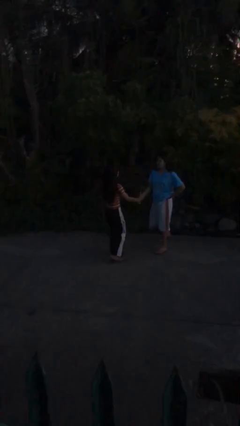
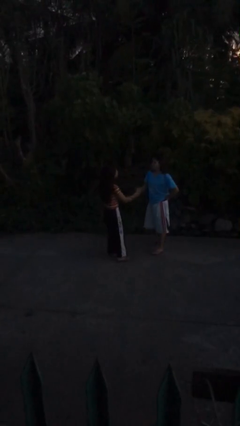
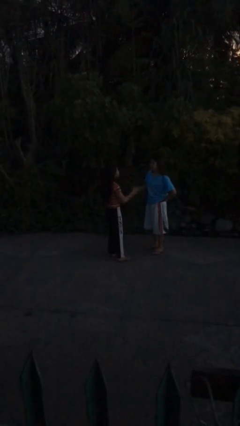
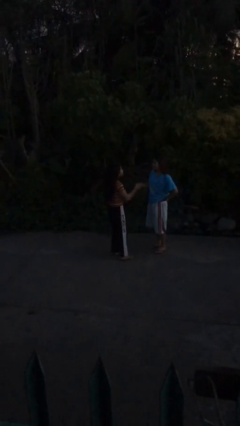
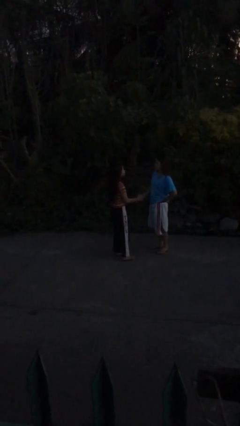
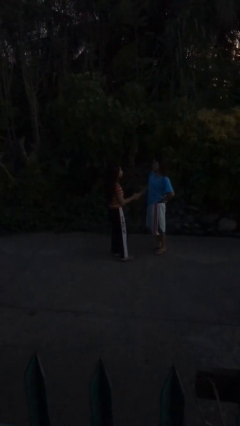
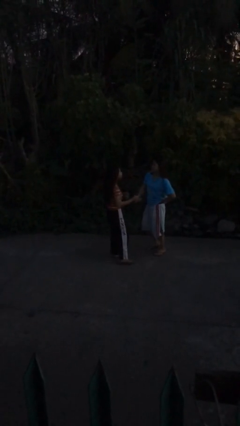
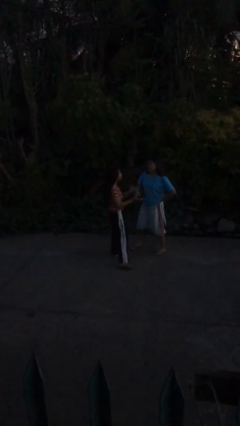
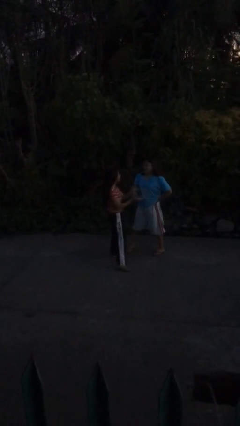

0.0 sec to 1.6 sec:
person shakes hand

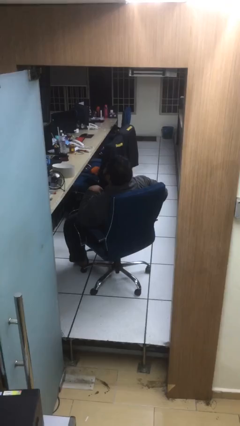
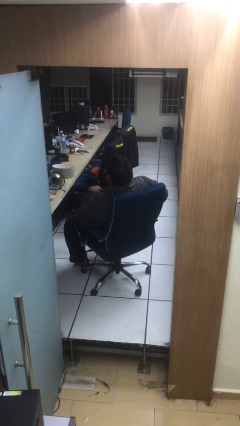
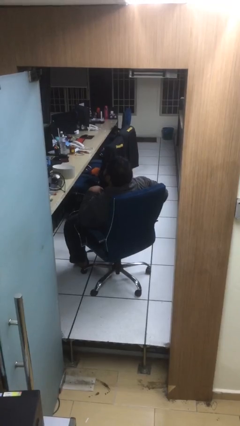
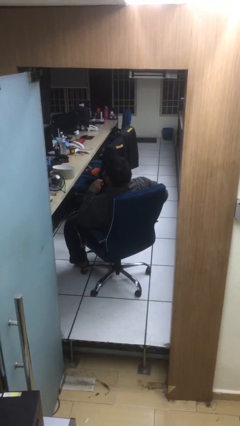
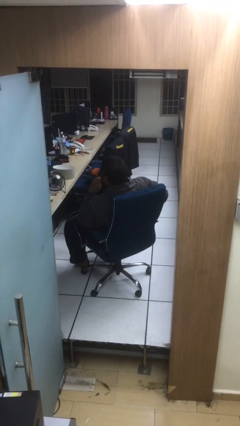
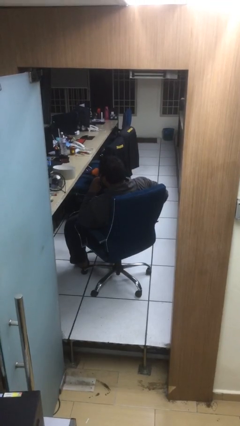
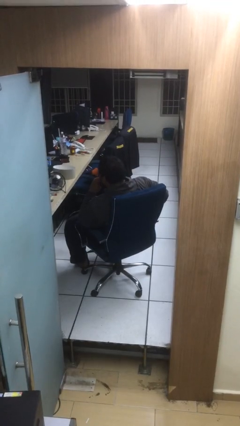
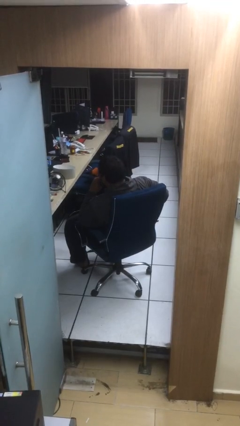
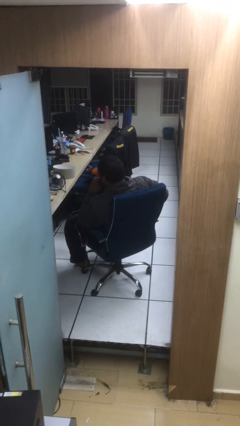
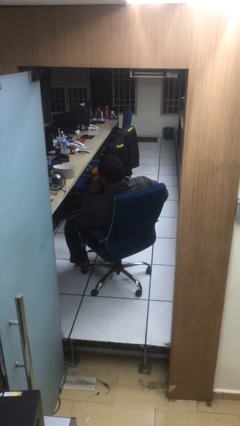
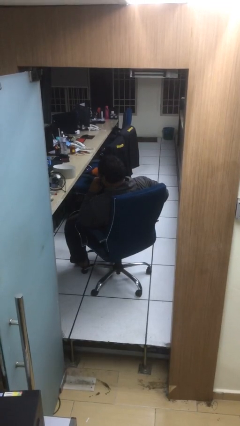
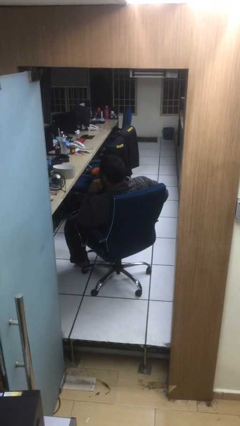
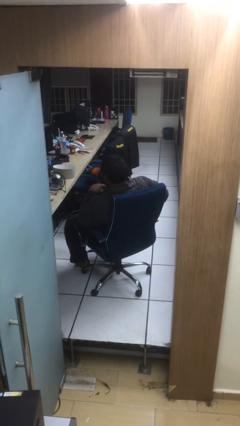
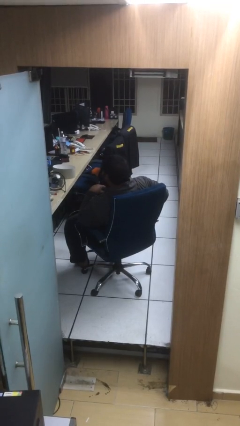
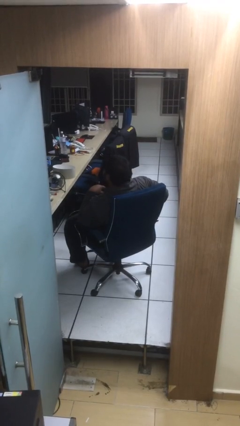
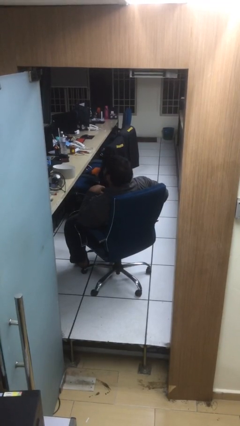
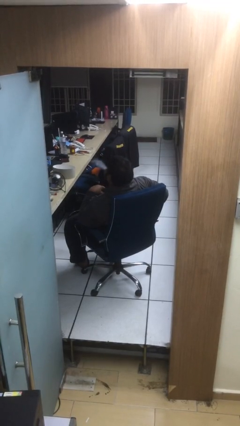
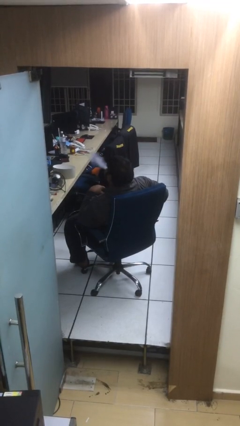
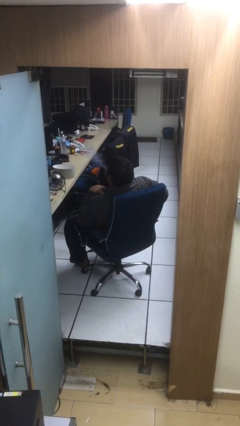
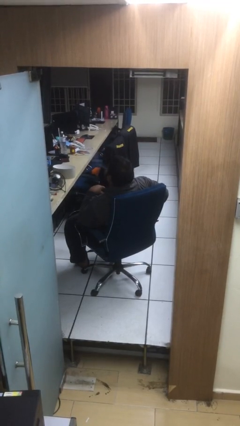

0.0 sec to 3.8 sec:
person vapes

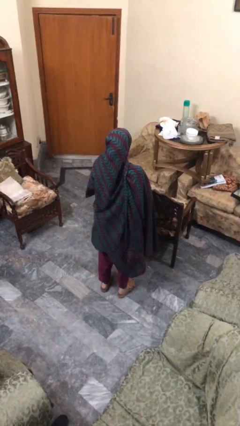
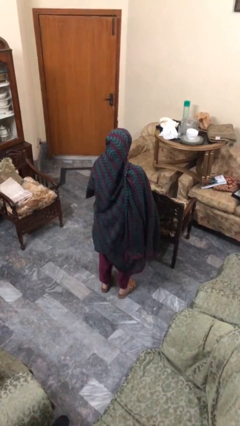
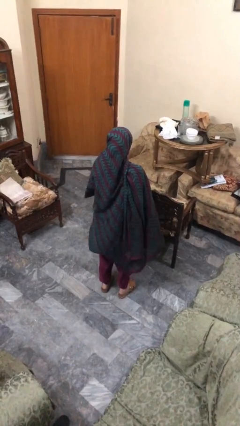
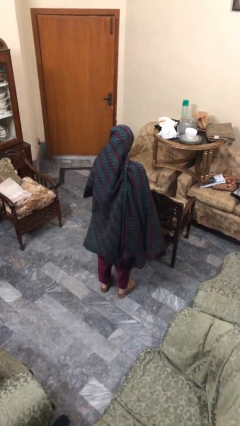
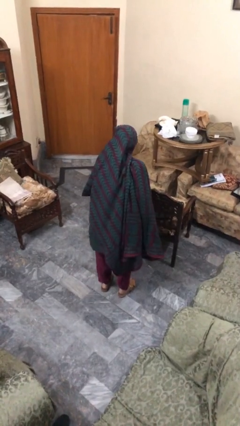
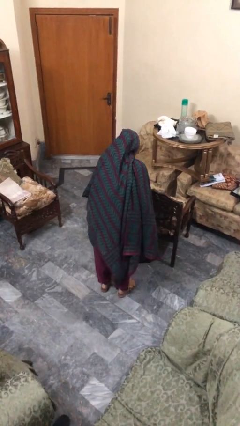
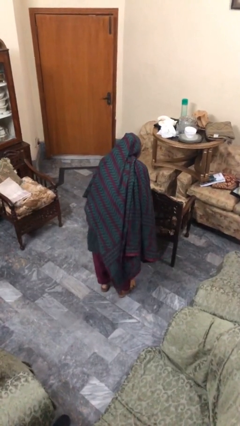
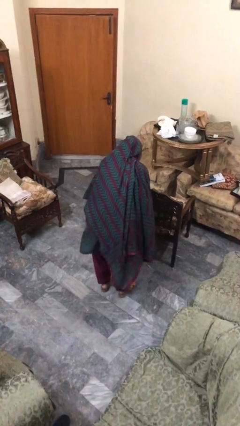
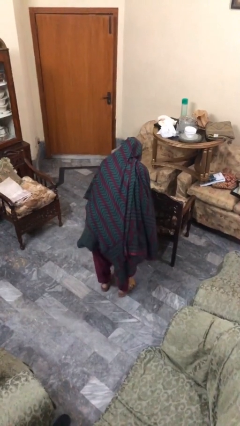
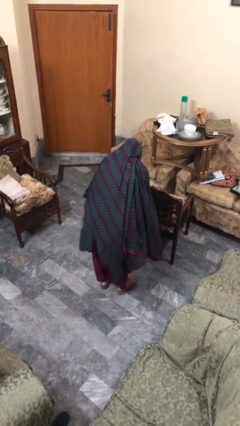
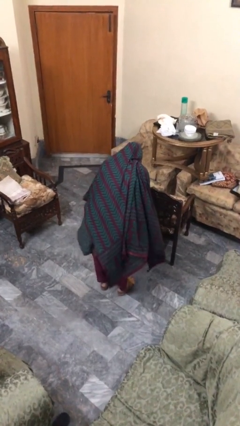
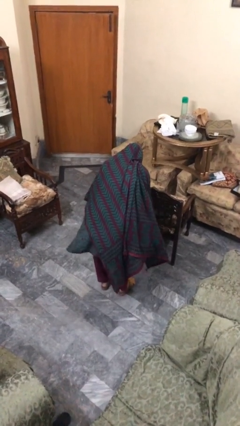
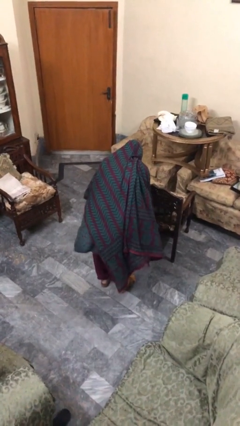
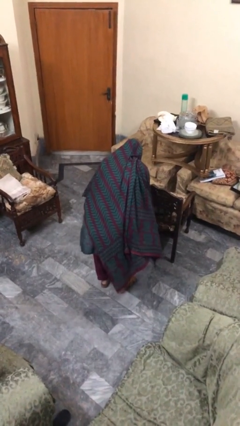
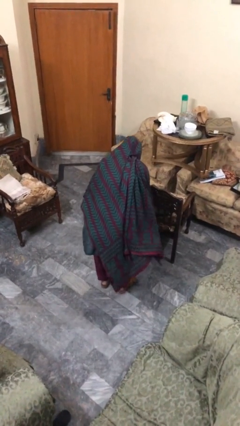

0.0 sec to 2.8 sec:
person bows

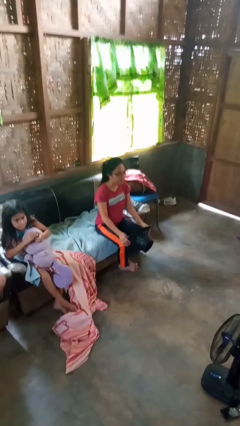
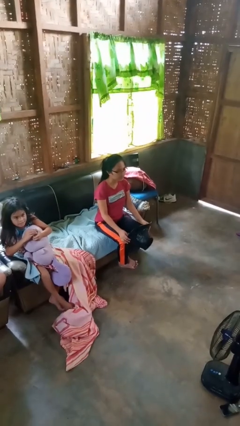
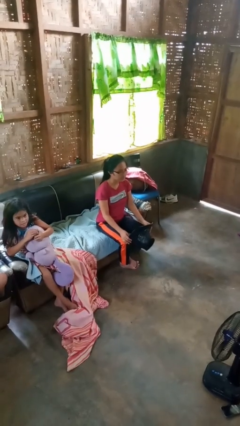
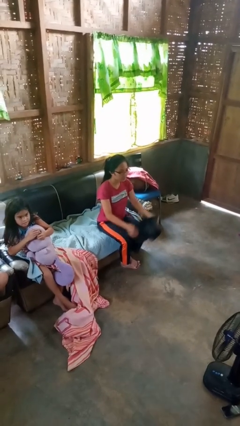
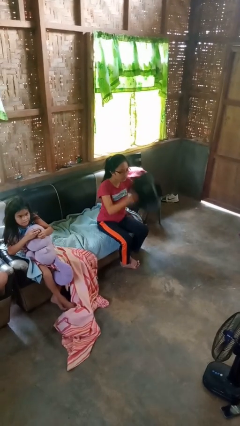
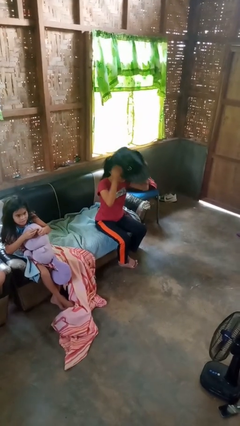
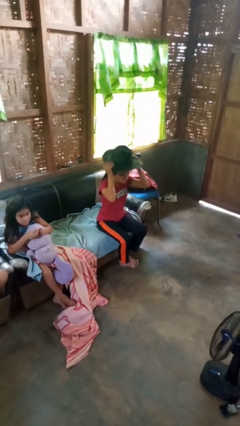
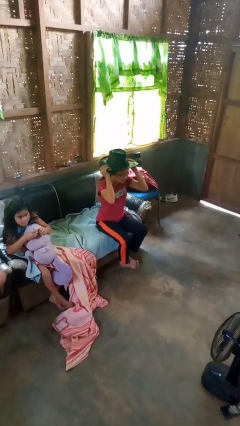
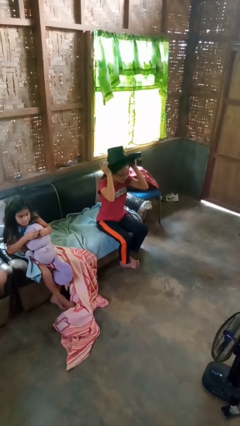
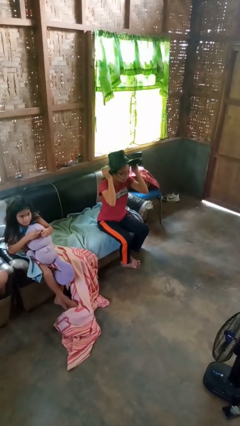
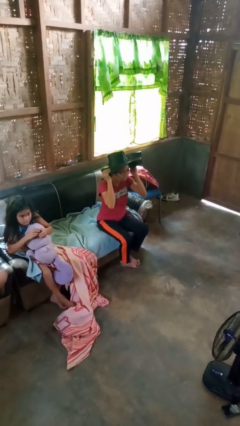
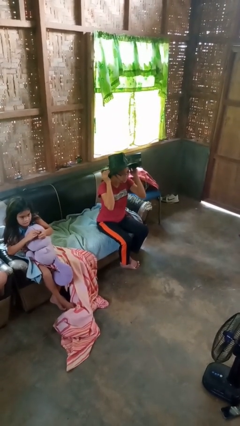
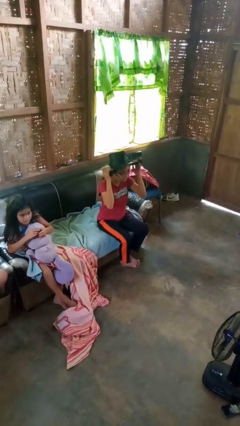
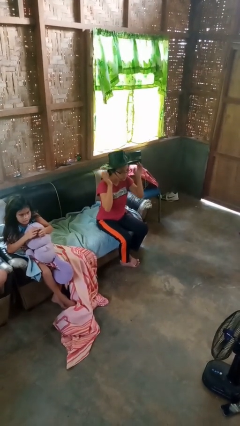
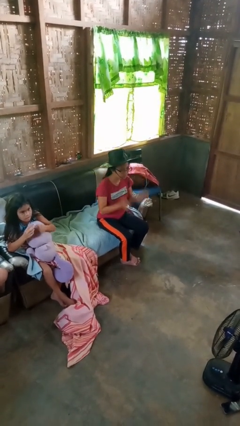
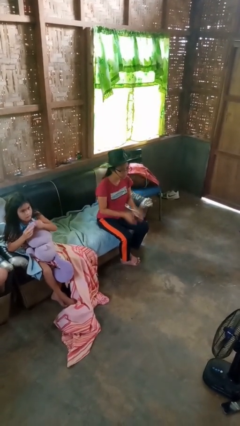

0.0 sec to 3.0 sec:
person puts on hat

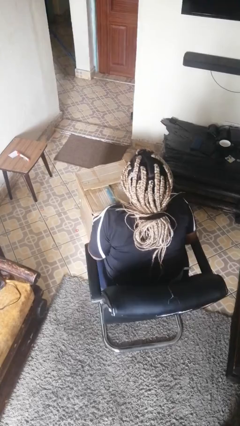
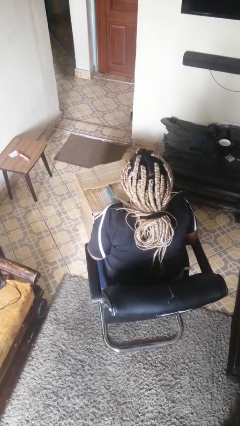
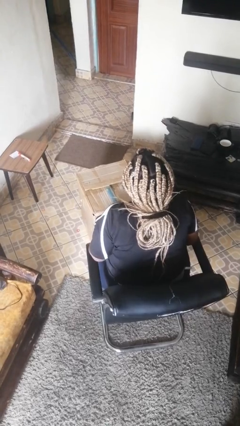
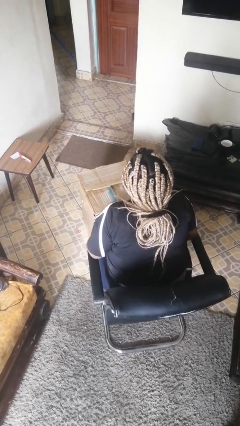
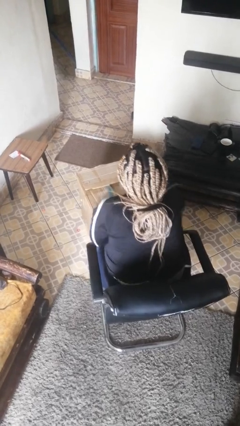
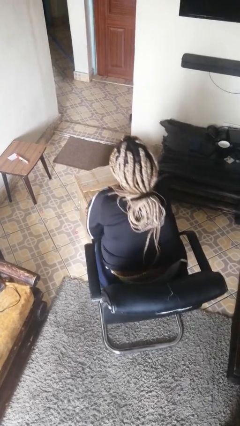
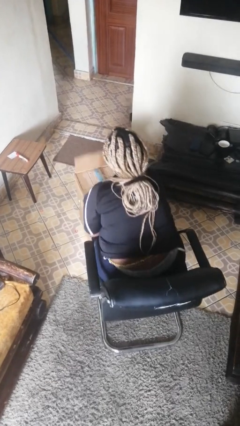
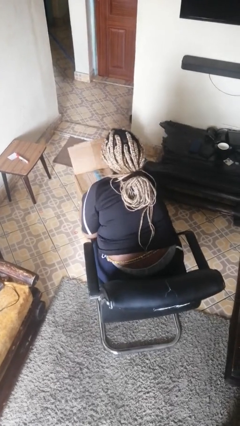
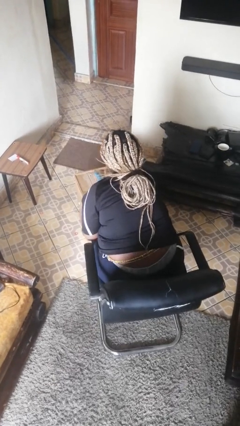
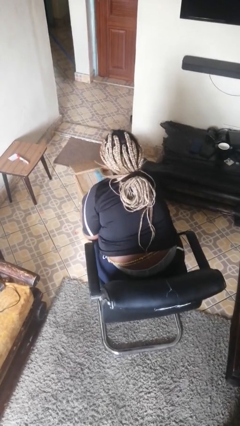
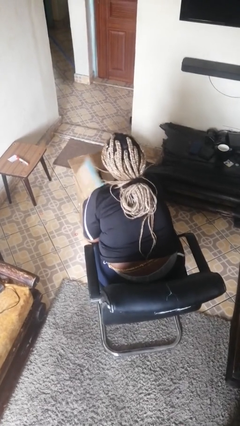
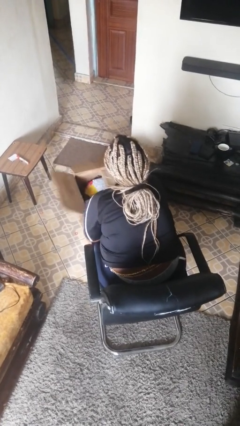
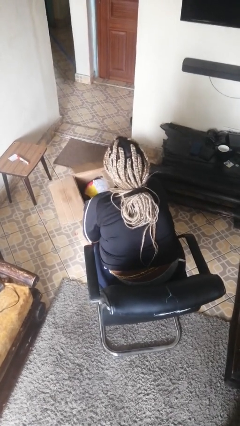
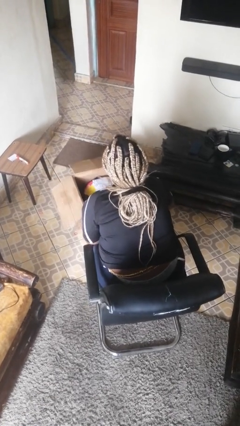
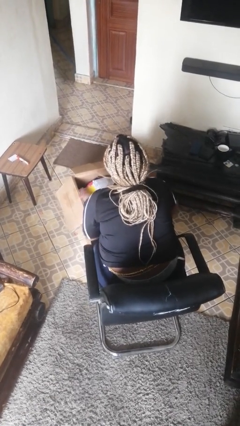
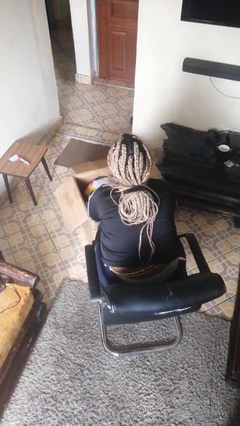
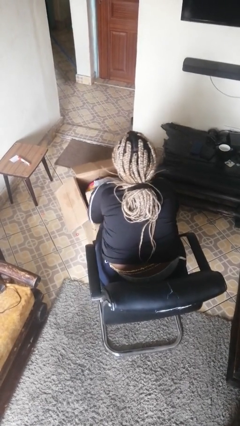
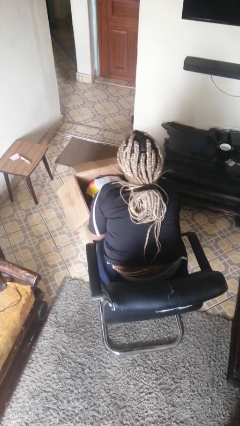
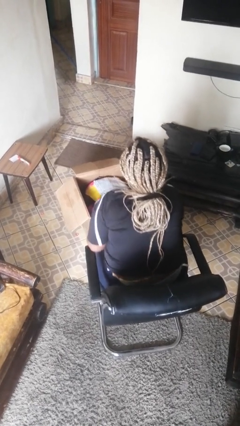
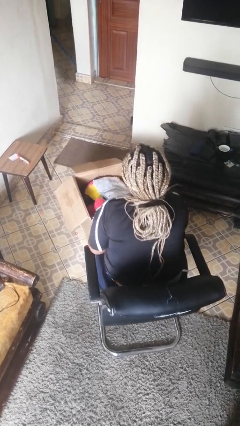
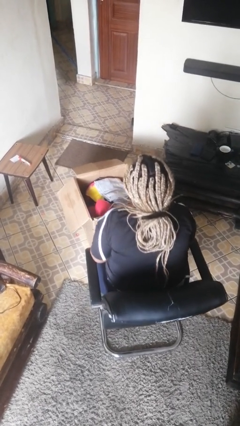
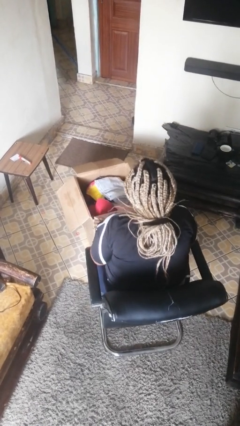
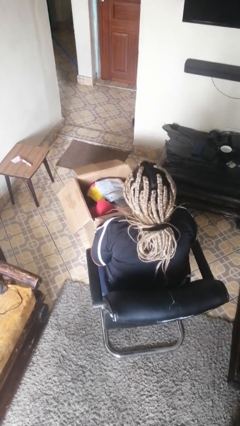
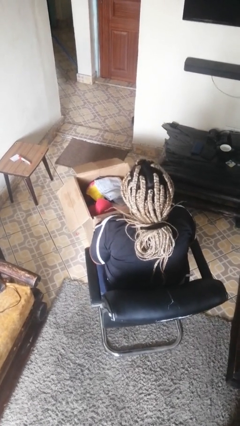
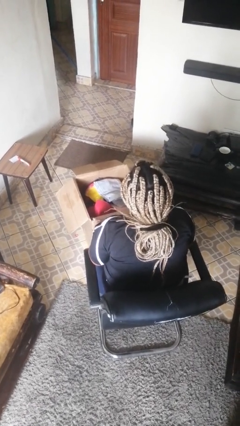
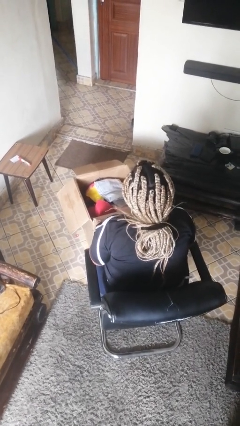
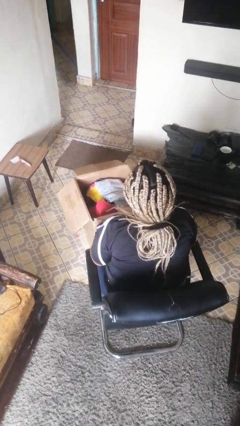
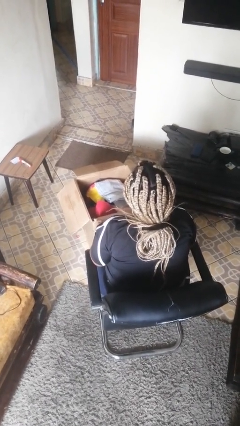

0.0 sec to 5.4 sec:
person opens box

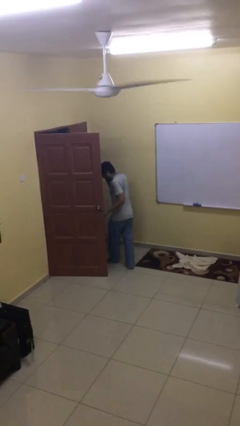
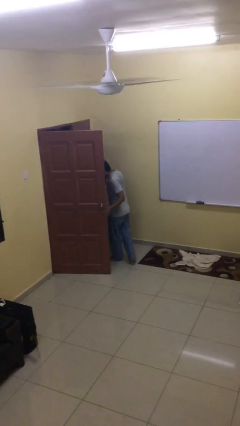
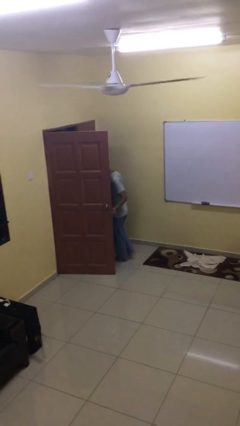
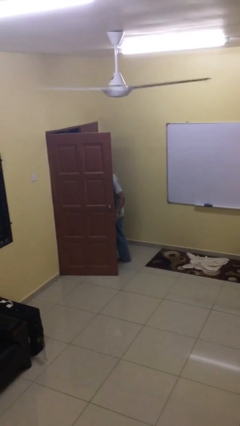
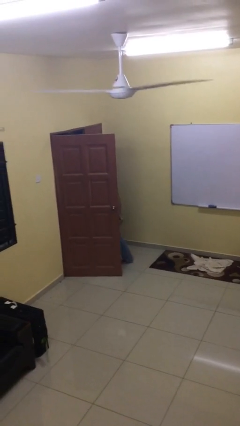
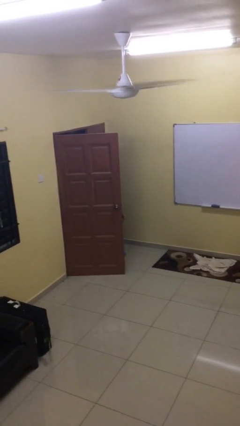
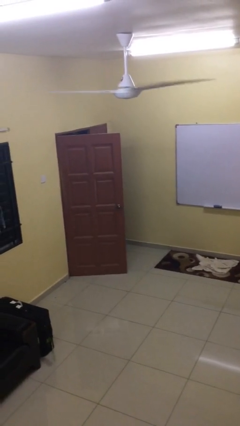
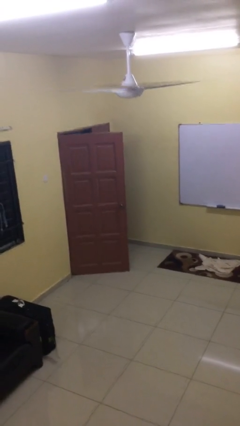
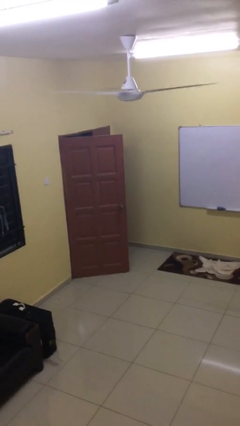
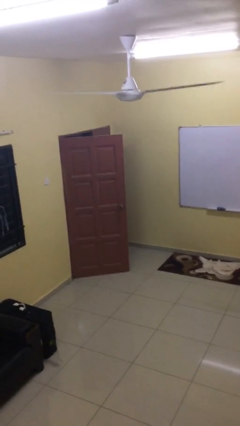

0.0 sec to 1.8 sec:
person exits scene through structure
